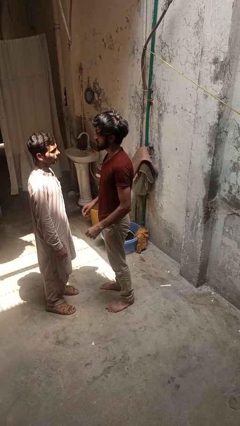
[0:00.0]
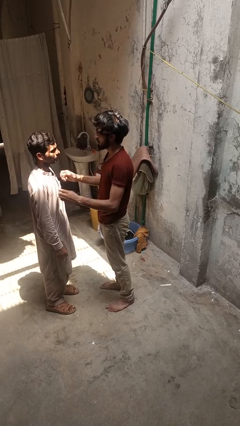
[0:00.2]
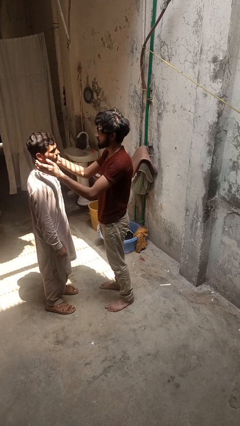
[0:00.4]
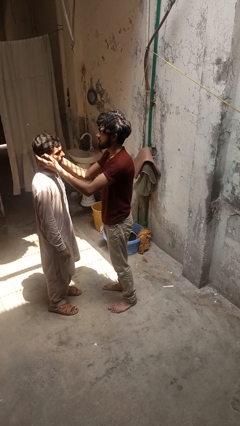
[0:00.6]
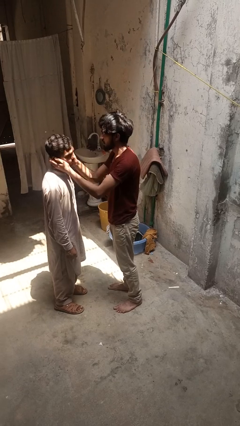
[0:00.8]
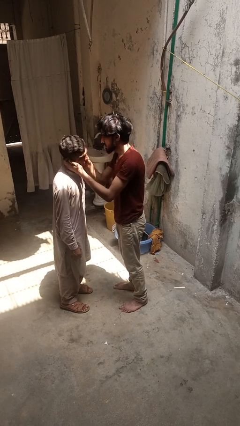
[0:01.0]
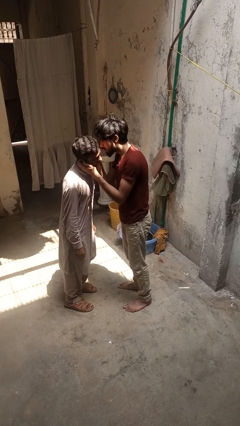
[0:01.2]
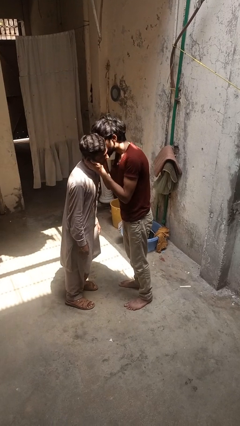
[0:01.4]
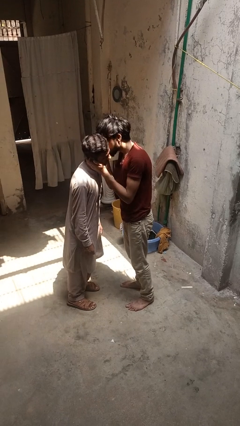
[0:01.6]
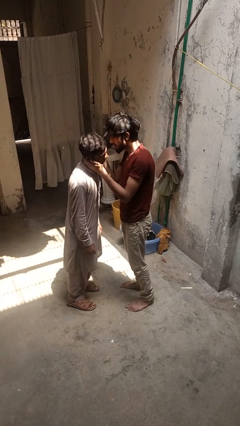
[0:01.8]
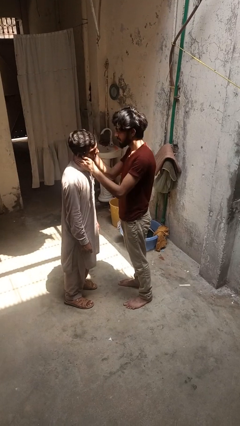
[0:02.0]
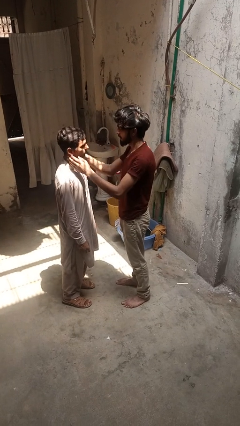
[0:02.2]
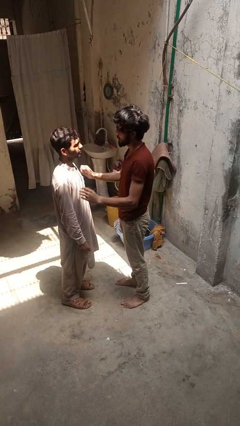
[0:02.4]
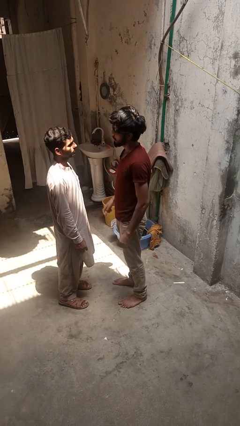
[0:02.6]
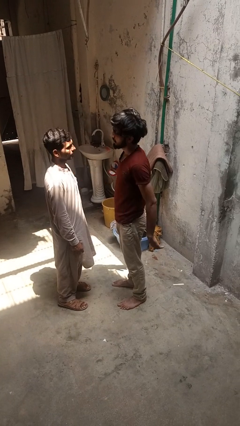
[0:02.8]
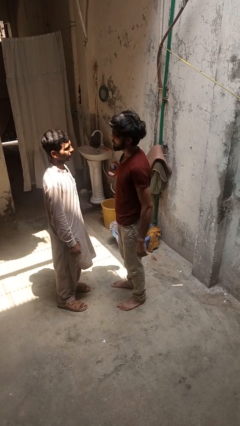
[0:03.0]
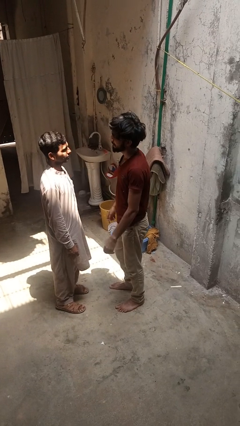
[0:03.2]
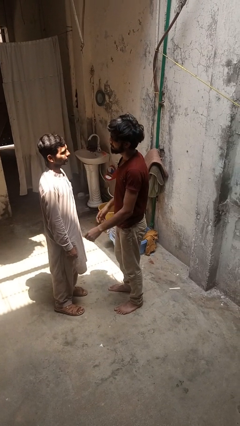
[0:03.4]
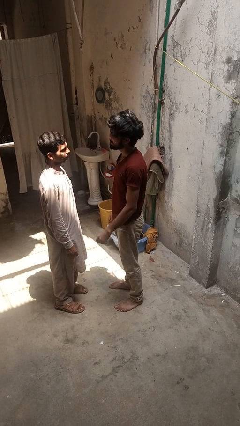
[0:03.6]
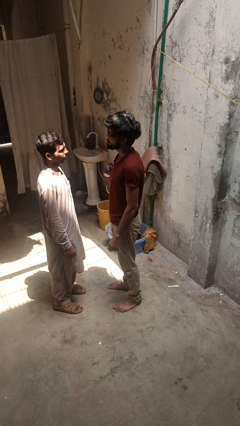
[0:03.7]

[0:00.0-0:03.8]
person kisses cheek of person

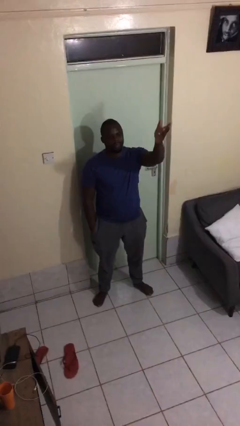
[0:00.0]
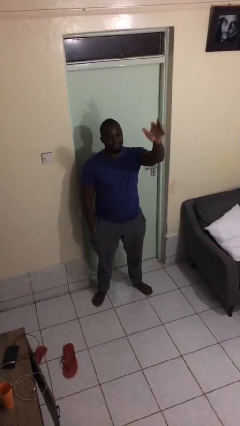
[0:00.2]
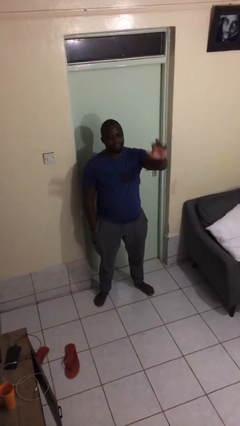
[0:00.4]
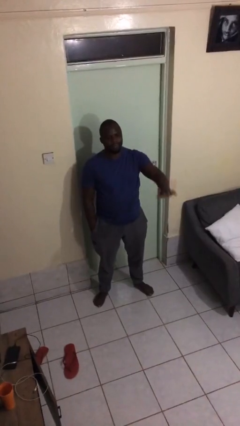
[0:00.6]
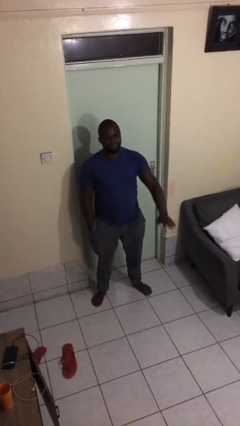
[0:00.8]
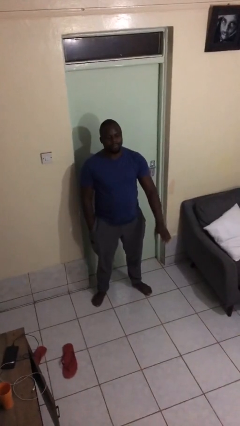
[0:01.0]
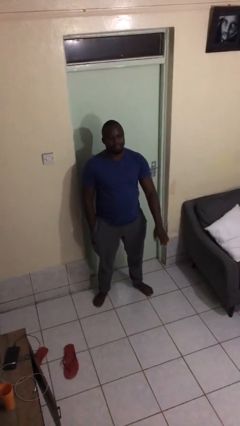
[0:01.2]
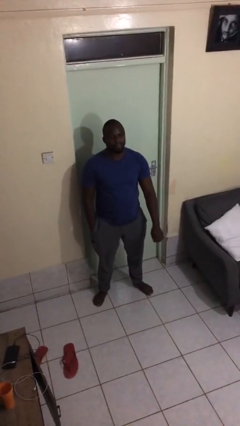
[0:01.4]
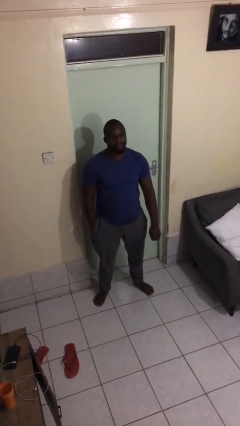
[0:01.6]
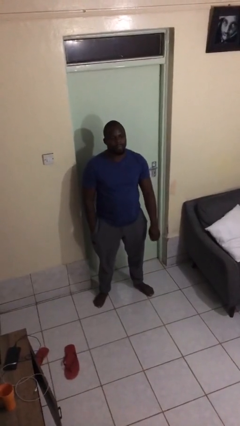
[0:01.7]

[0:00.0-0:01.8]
person gestures swipe down

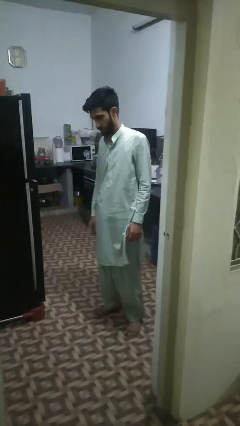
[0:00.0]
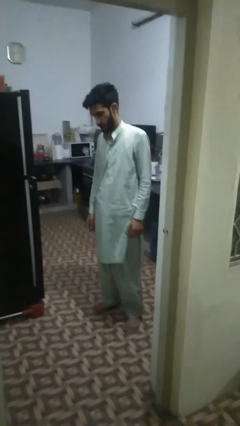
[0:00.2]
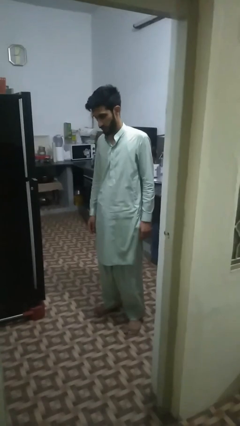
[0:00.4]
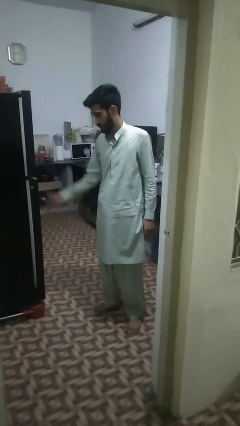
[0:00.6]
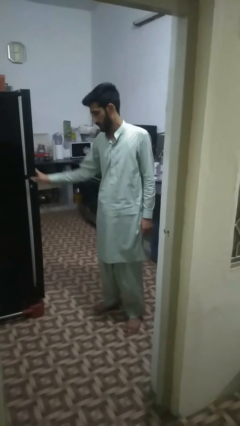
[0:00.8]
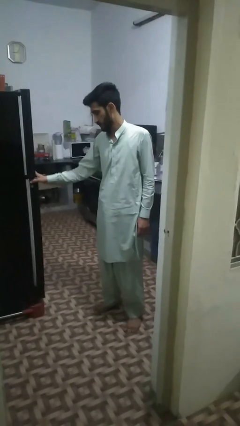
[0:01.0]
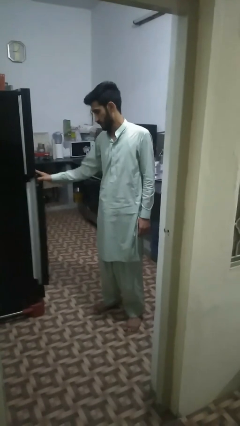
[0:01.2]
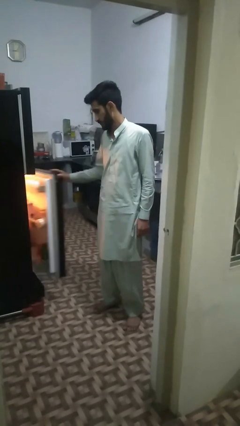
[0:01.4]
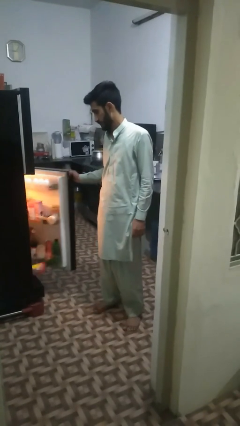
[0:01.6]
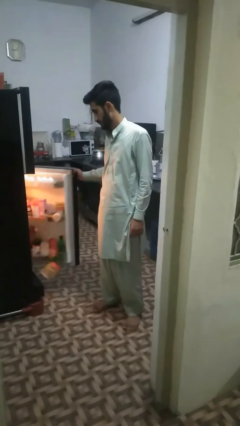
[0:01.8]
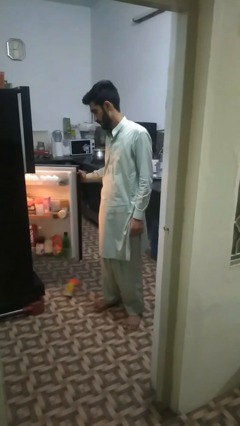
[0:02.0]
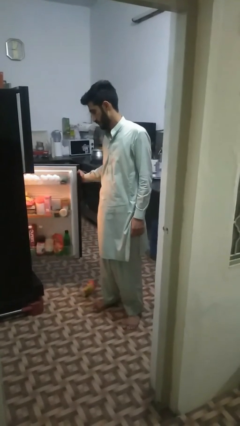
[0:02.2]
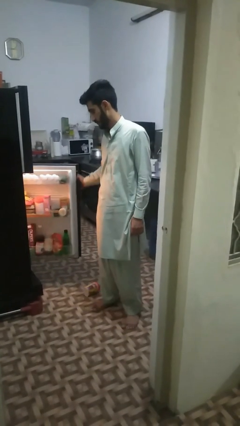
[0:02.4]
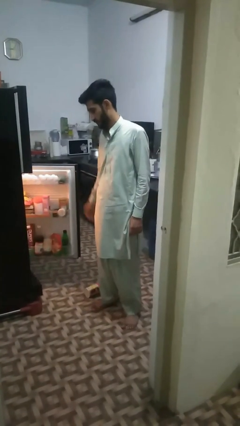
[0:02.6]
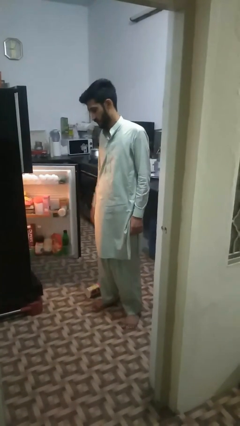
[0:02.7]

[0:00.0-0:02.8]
person opens refrigerator

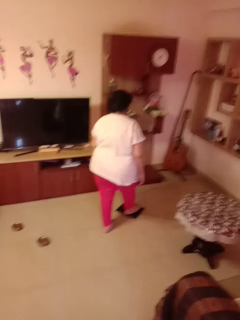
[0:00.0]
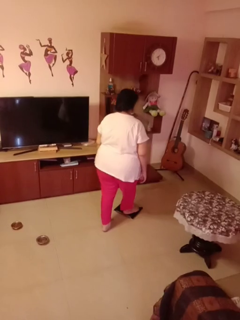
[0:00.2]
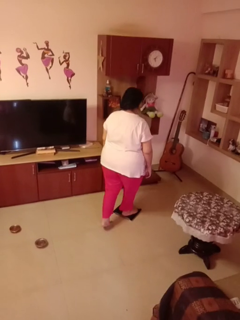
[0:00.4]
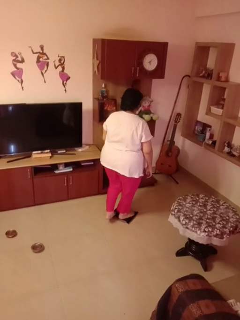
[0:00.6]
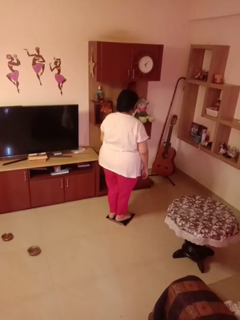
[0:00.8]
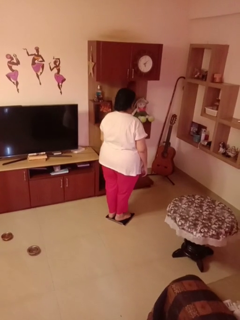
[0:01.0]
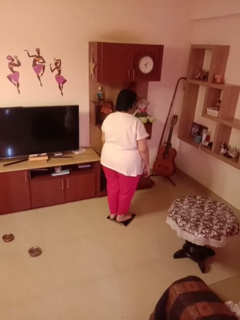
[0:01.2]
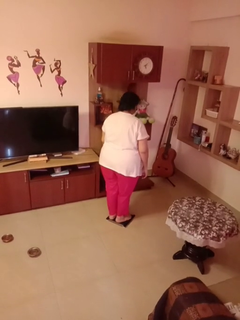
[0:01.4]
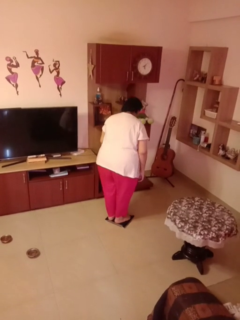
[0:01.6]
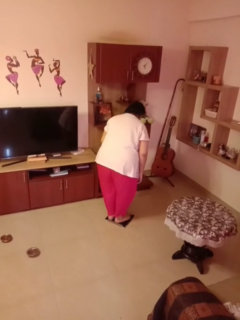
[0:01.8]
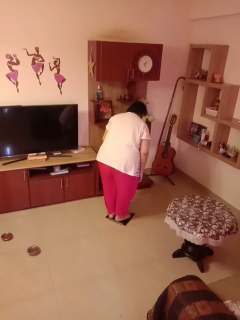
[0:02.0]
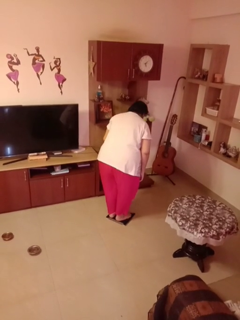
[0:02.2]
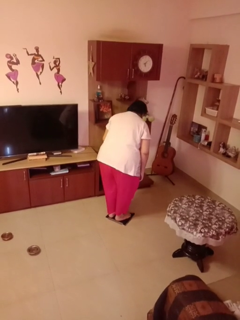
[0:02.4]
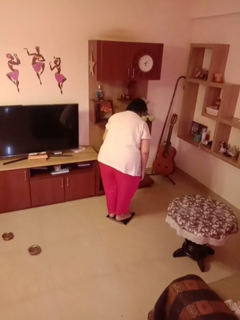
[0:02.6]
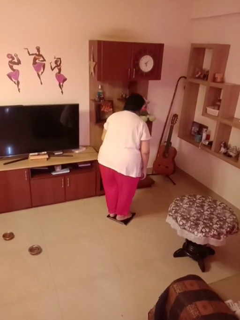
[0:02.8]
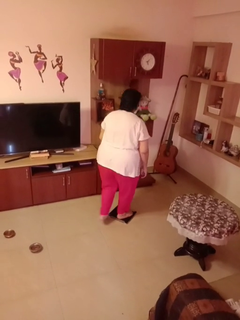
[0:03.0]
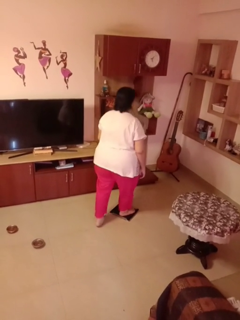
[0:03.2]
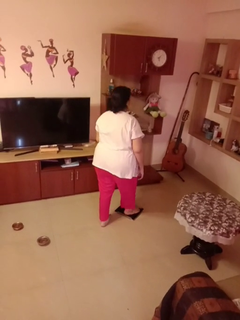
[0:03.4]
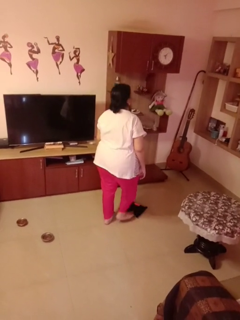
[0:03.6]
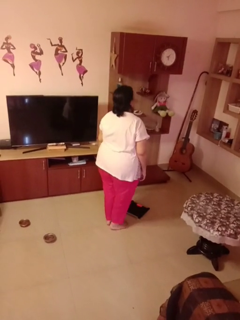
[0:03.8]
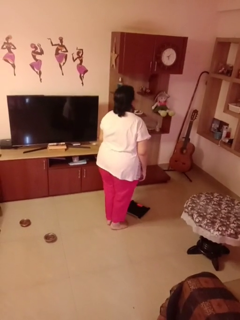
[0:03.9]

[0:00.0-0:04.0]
person uses bodyweight scale

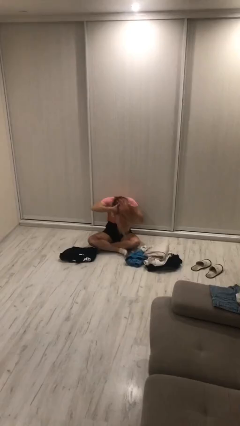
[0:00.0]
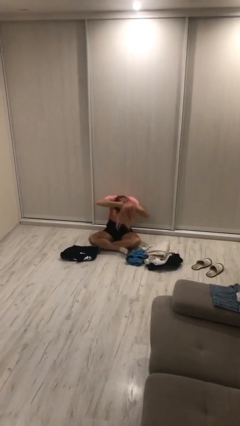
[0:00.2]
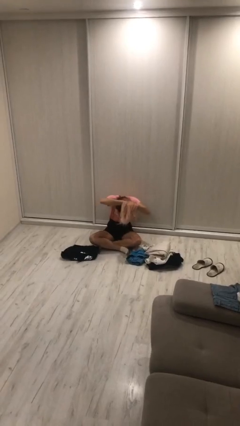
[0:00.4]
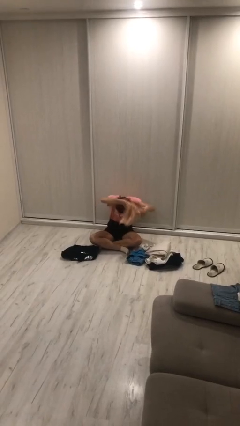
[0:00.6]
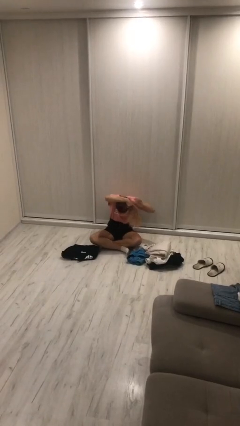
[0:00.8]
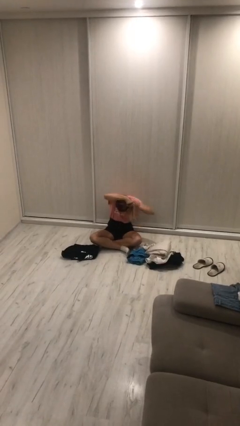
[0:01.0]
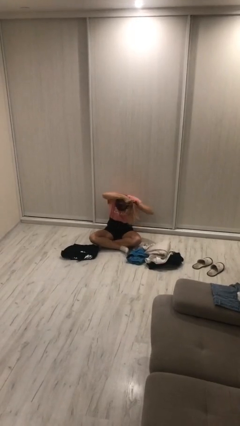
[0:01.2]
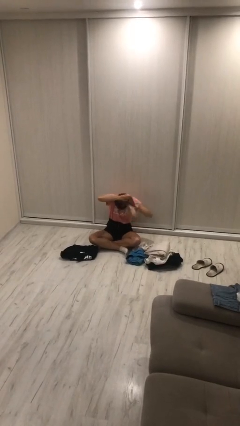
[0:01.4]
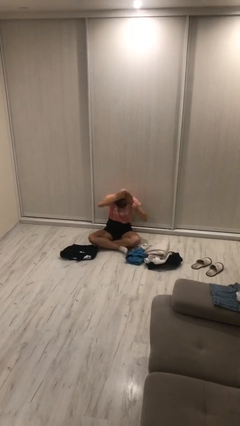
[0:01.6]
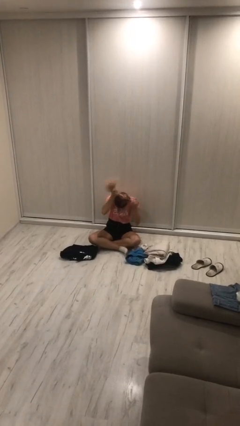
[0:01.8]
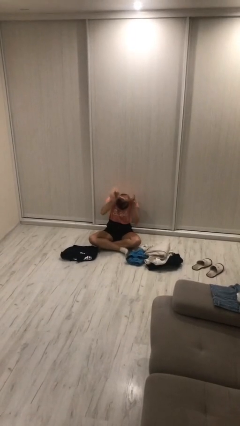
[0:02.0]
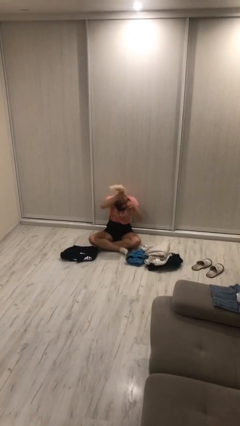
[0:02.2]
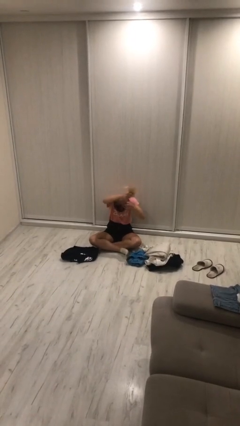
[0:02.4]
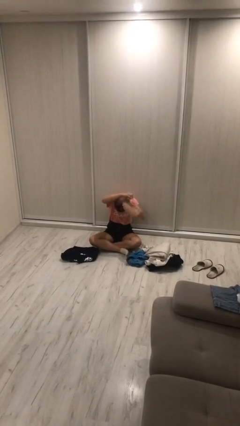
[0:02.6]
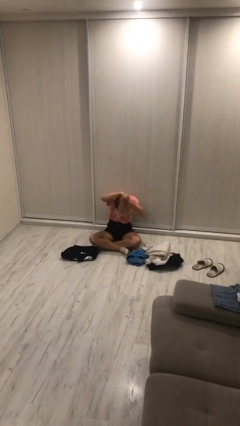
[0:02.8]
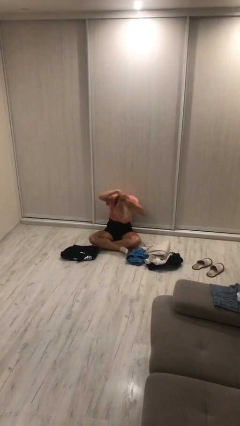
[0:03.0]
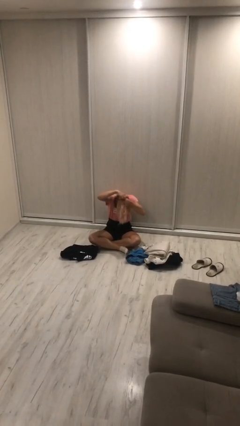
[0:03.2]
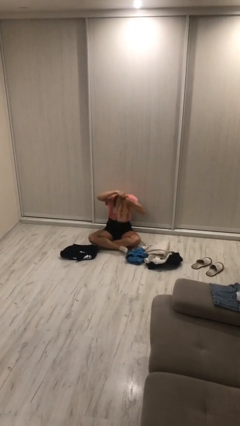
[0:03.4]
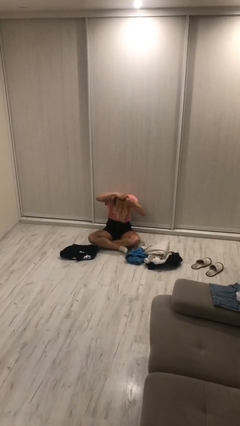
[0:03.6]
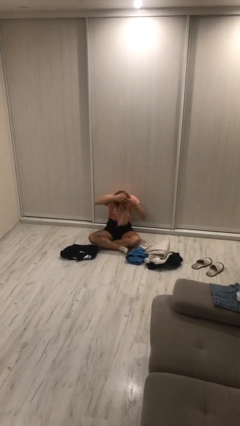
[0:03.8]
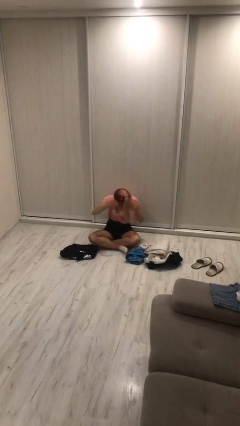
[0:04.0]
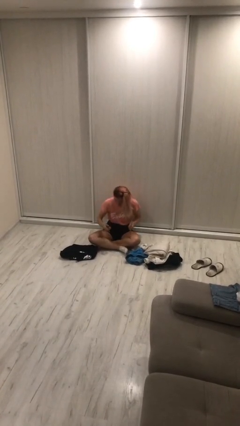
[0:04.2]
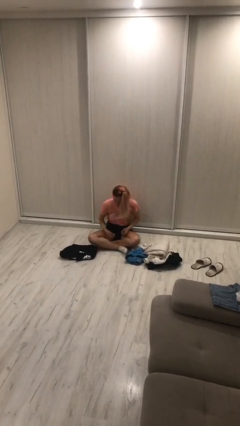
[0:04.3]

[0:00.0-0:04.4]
person puts hair in ponytail

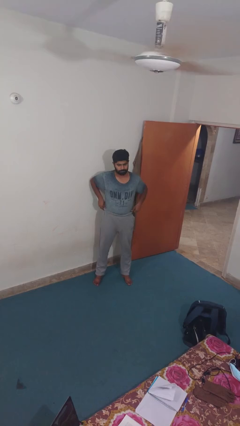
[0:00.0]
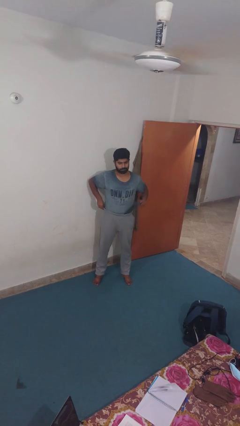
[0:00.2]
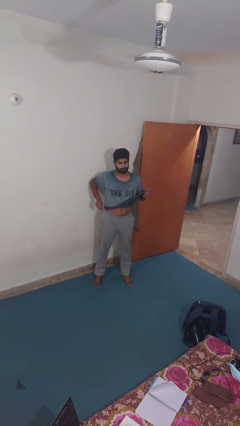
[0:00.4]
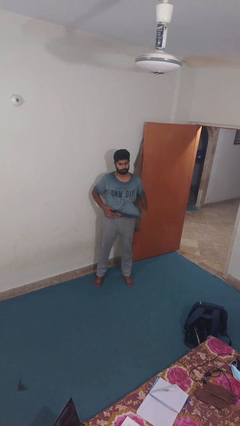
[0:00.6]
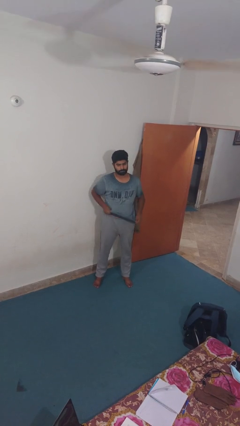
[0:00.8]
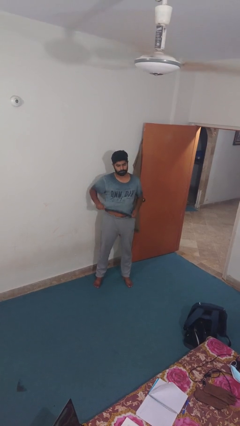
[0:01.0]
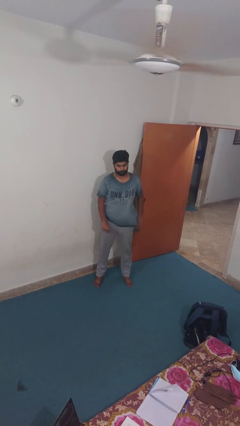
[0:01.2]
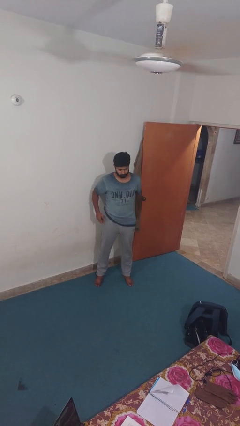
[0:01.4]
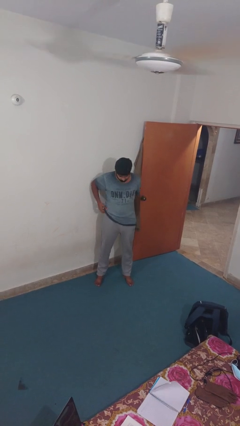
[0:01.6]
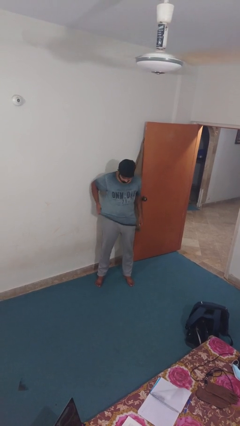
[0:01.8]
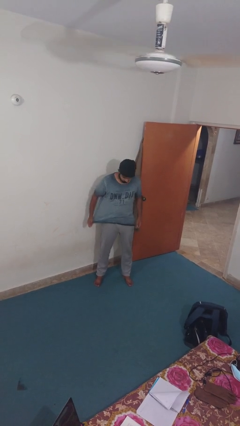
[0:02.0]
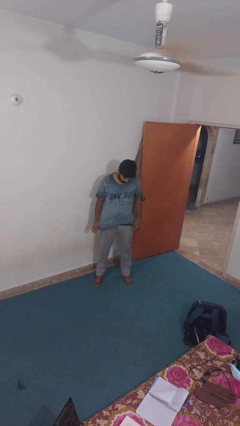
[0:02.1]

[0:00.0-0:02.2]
person untucks shirt
